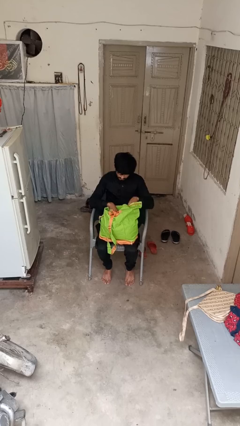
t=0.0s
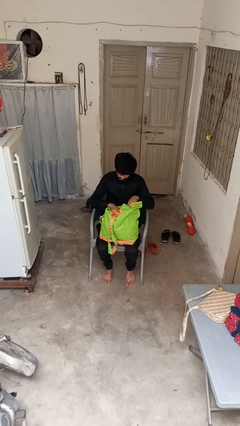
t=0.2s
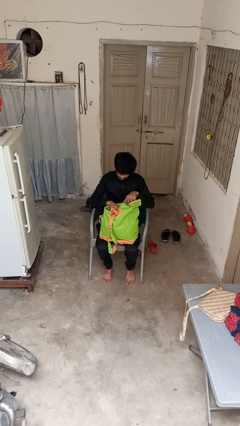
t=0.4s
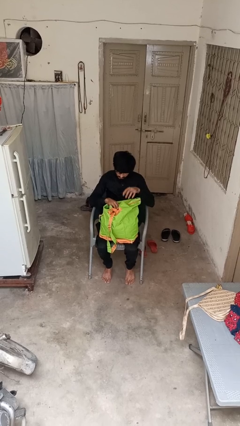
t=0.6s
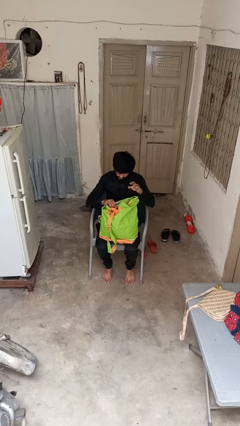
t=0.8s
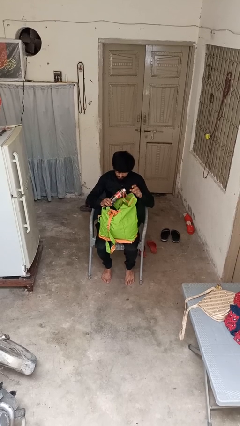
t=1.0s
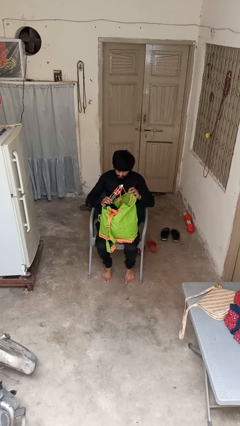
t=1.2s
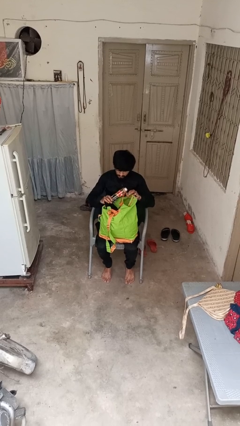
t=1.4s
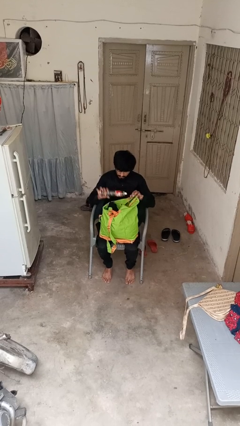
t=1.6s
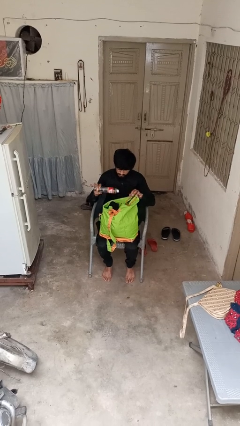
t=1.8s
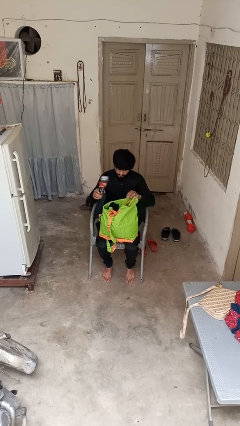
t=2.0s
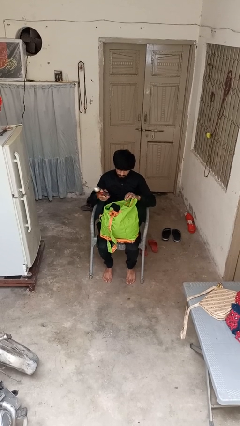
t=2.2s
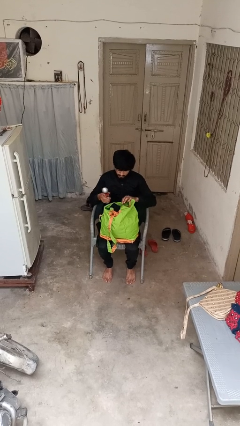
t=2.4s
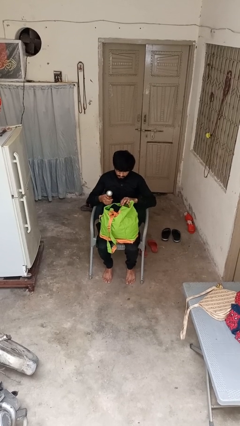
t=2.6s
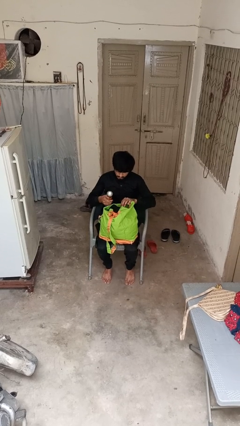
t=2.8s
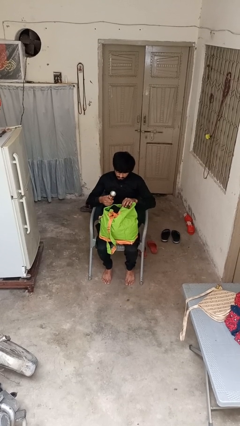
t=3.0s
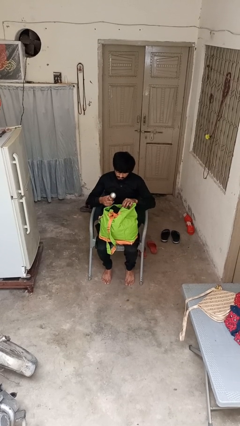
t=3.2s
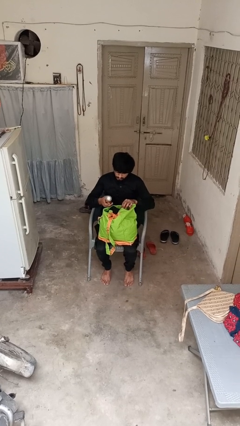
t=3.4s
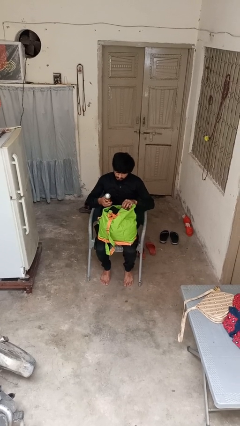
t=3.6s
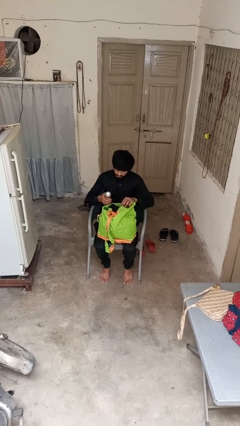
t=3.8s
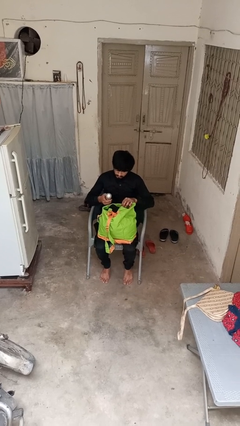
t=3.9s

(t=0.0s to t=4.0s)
person takes object from backpack

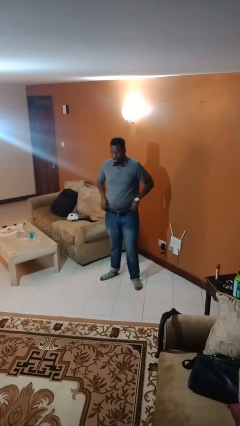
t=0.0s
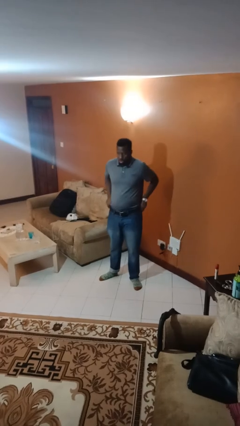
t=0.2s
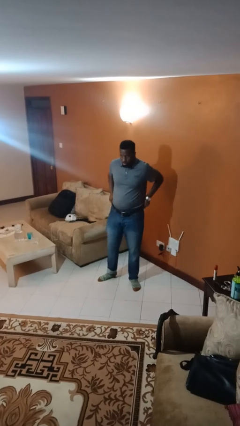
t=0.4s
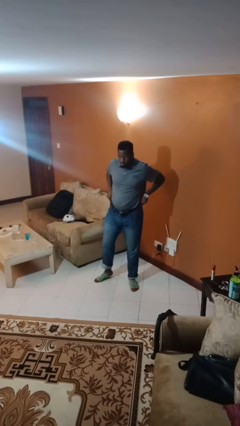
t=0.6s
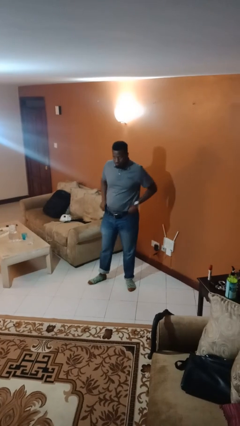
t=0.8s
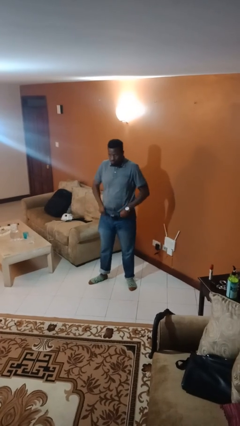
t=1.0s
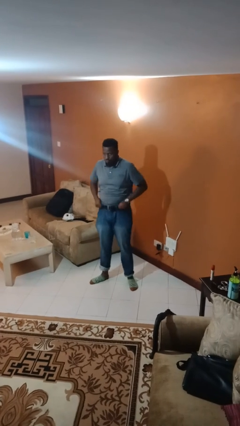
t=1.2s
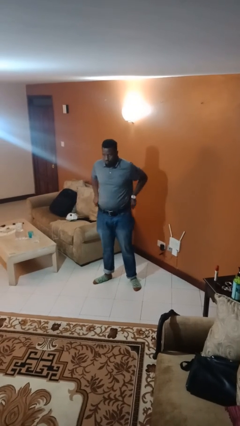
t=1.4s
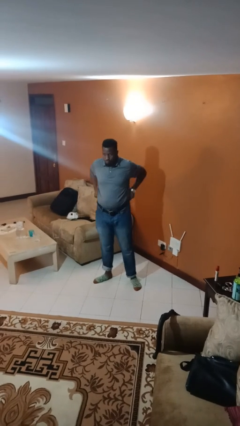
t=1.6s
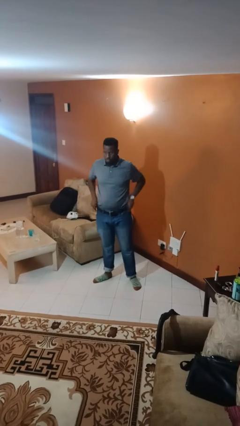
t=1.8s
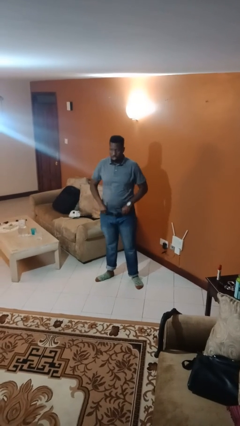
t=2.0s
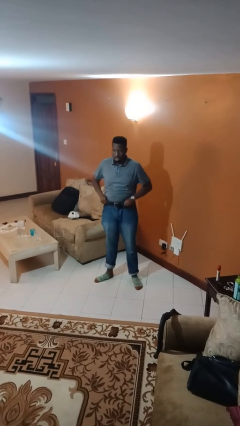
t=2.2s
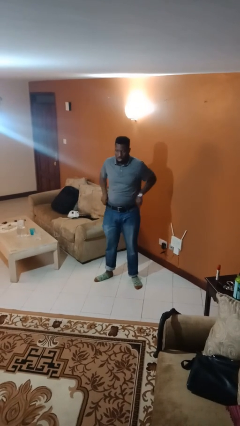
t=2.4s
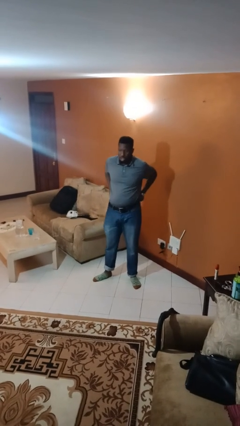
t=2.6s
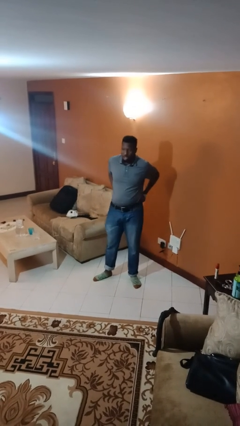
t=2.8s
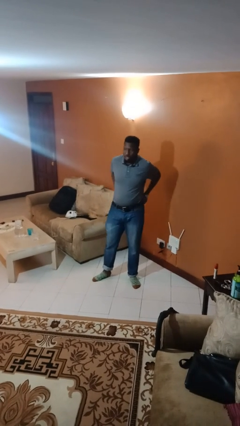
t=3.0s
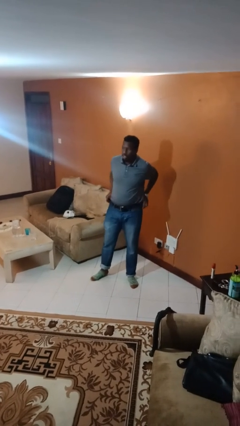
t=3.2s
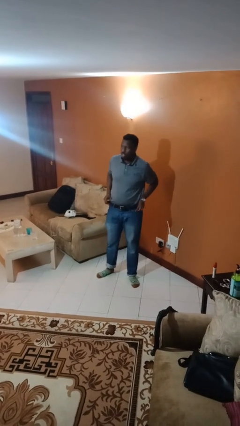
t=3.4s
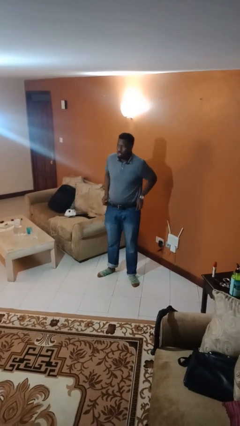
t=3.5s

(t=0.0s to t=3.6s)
person hikes up pants

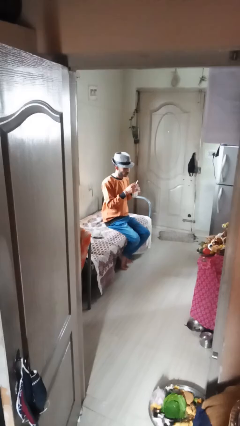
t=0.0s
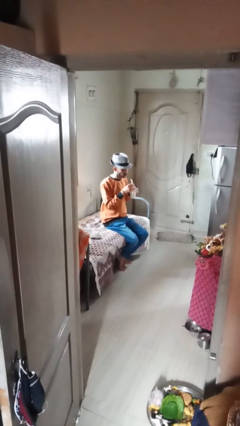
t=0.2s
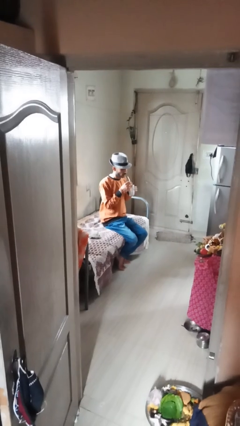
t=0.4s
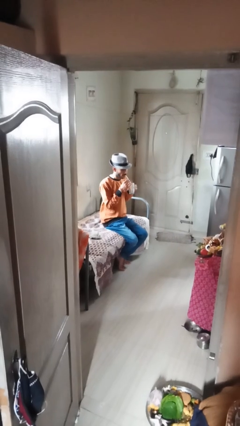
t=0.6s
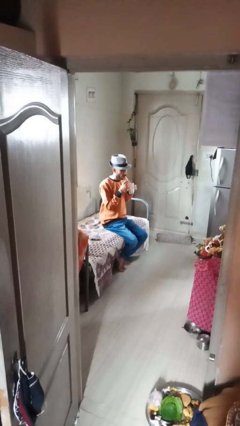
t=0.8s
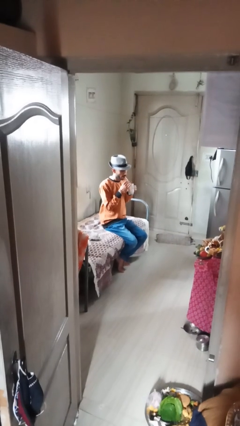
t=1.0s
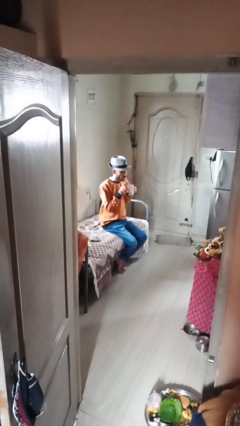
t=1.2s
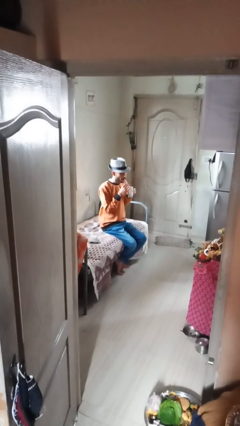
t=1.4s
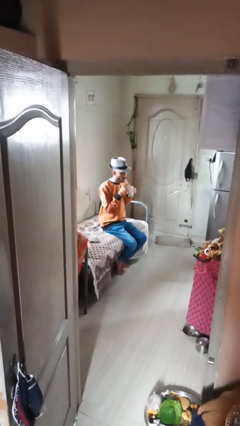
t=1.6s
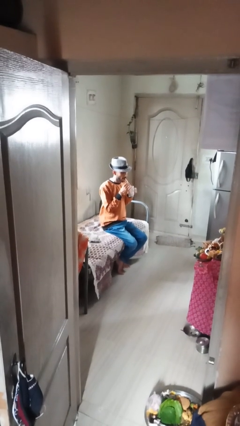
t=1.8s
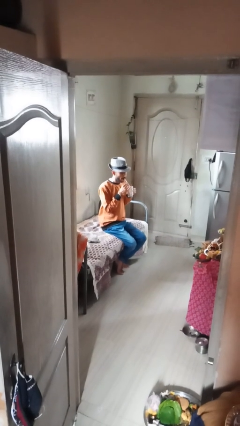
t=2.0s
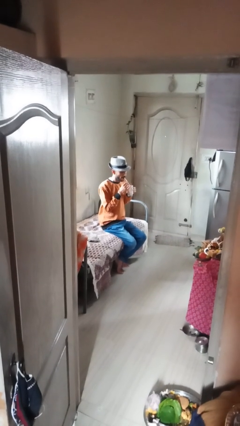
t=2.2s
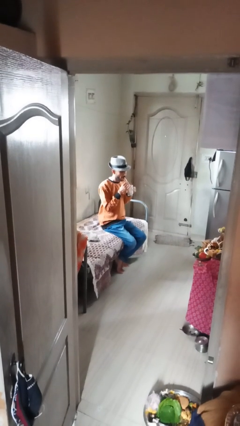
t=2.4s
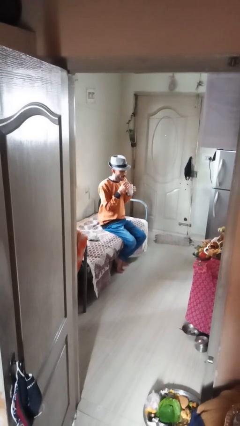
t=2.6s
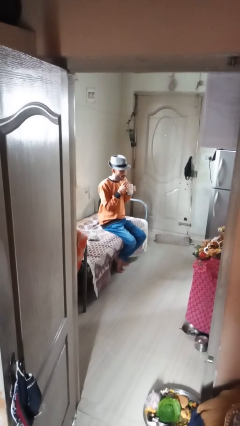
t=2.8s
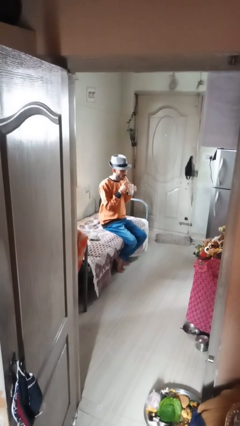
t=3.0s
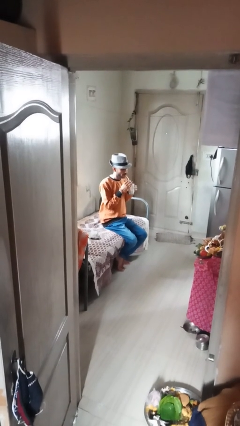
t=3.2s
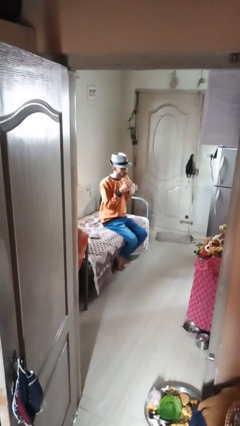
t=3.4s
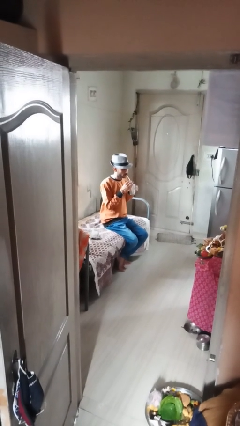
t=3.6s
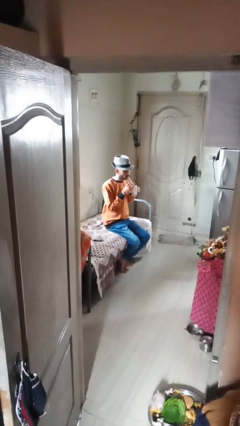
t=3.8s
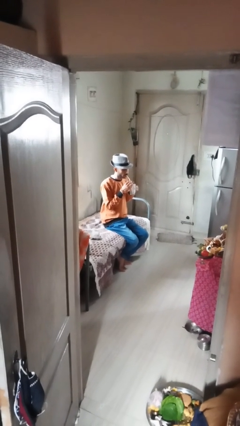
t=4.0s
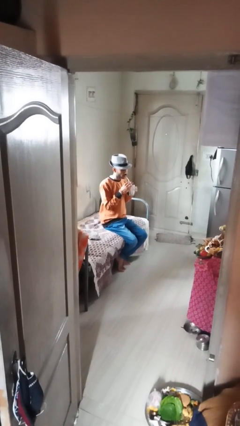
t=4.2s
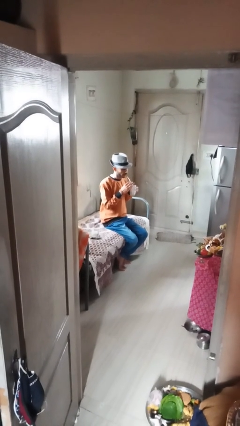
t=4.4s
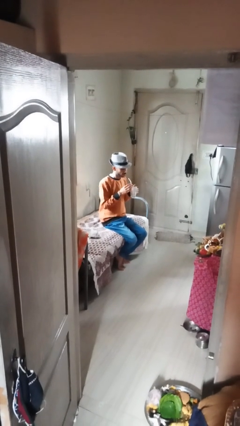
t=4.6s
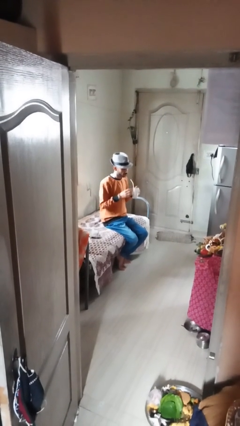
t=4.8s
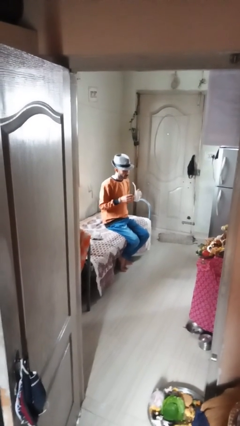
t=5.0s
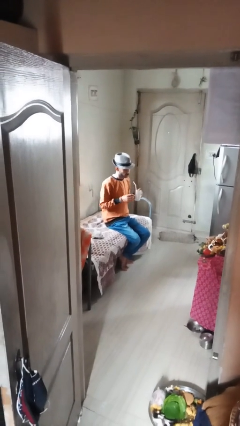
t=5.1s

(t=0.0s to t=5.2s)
person drinks from straw

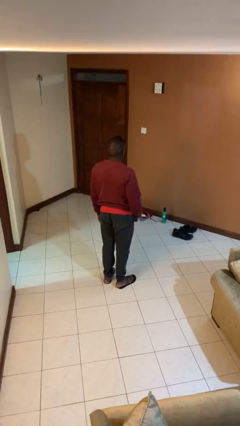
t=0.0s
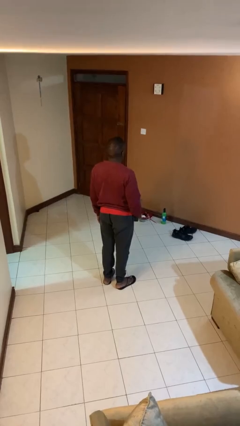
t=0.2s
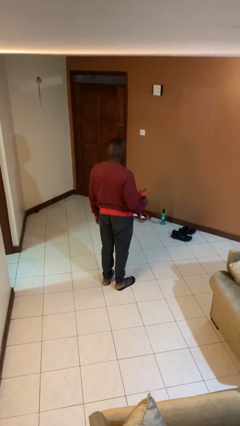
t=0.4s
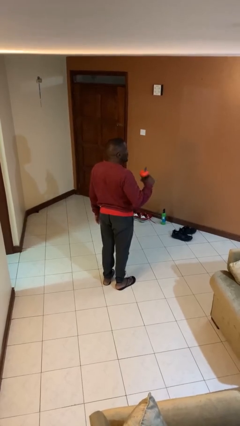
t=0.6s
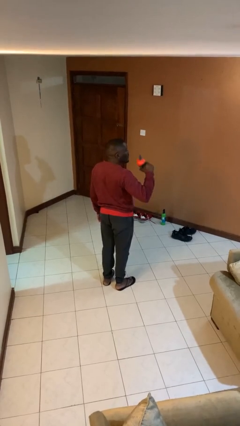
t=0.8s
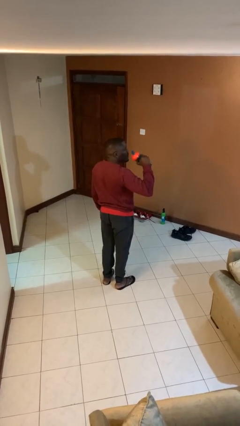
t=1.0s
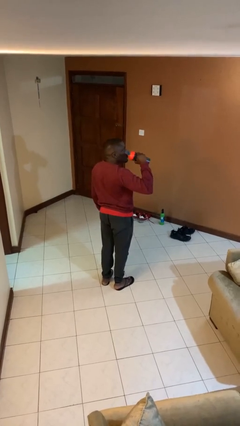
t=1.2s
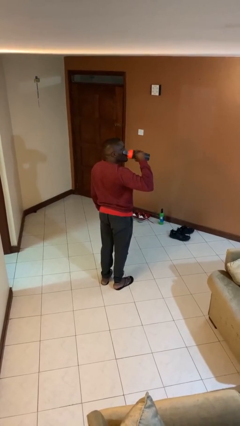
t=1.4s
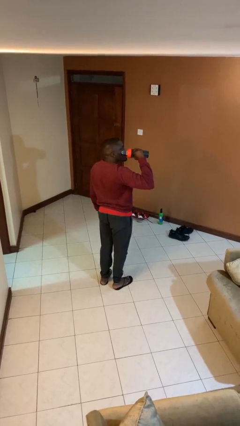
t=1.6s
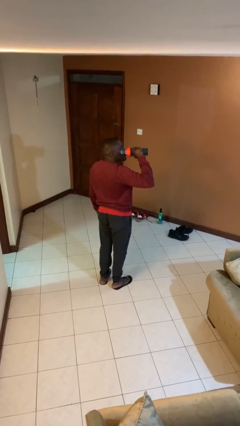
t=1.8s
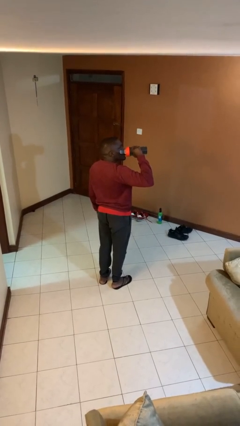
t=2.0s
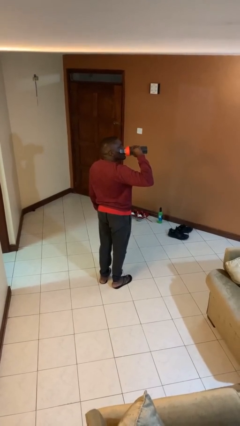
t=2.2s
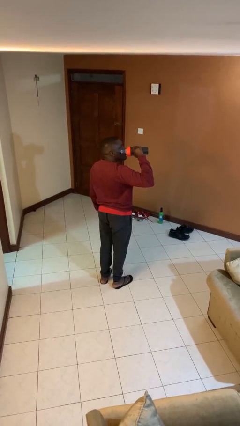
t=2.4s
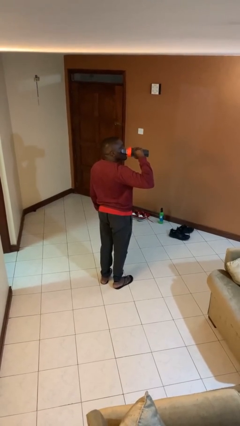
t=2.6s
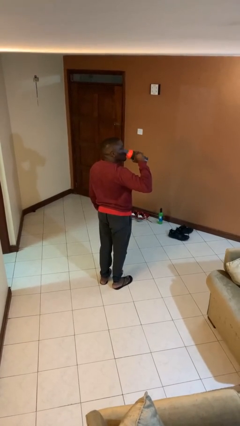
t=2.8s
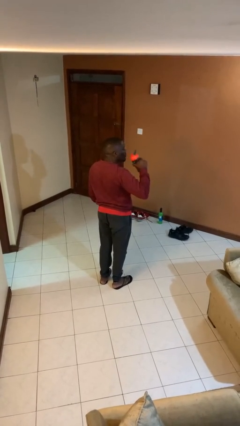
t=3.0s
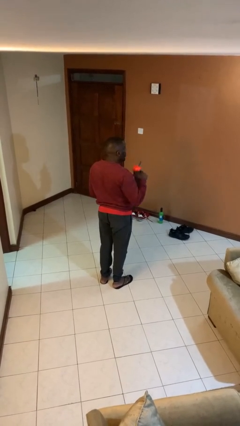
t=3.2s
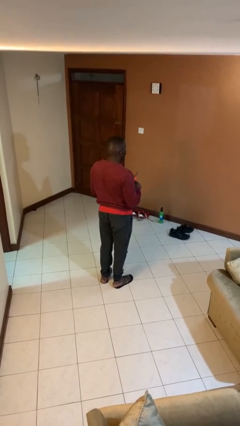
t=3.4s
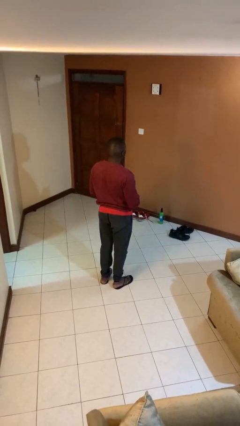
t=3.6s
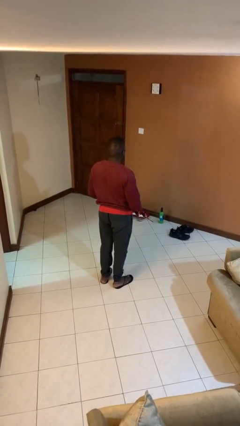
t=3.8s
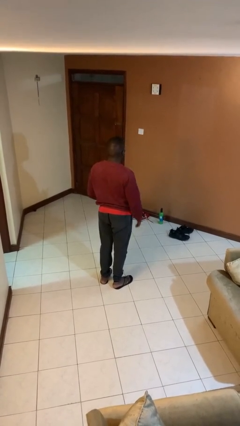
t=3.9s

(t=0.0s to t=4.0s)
person drinks from bottle

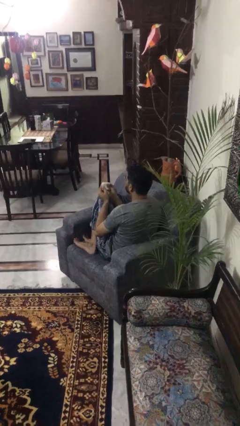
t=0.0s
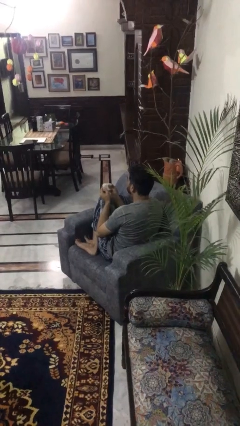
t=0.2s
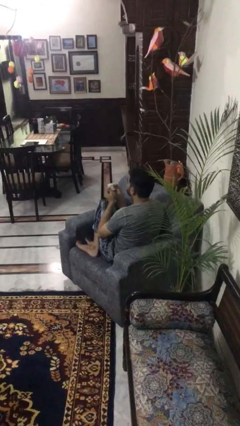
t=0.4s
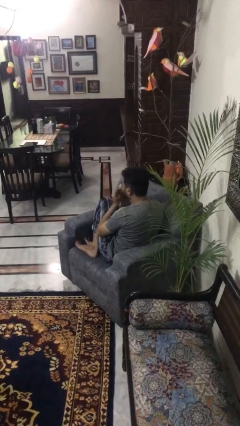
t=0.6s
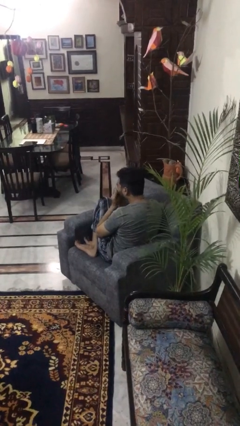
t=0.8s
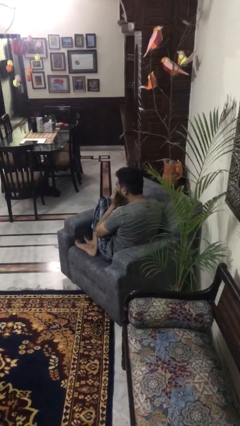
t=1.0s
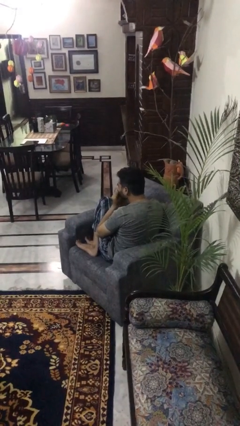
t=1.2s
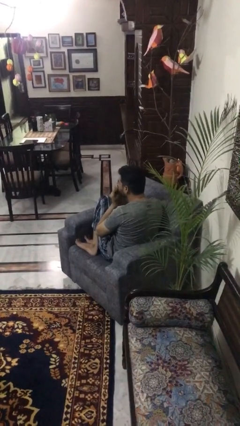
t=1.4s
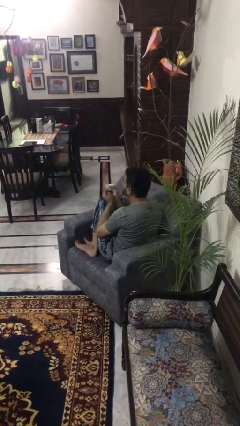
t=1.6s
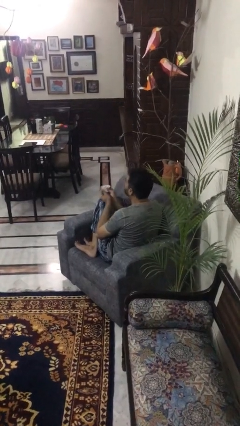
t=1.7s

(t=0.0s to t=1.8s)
person blows nose
